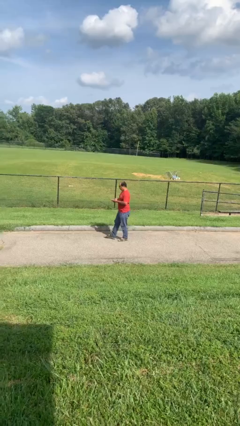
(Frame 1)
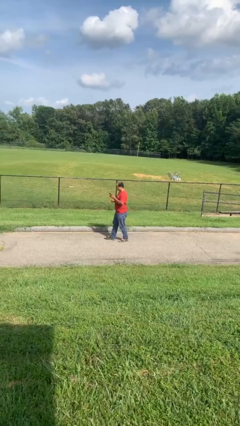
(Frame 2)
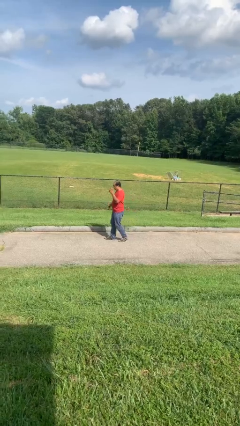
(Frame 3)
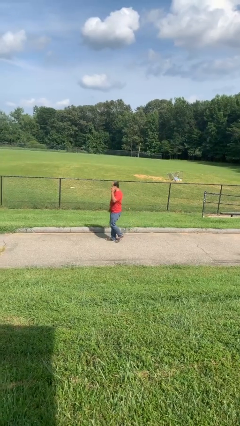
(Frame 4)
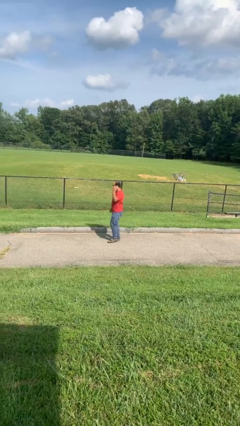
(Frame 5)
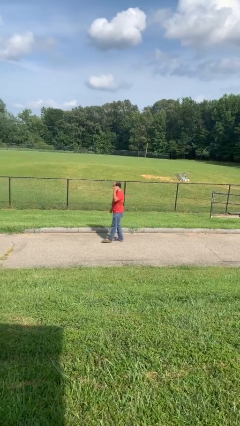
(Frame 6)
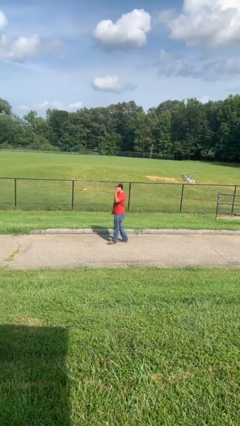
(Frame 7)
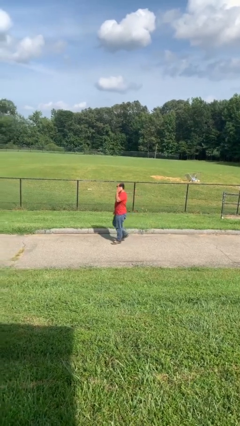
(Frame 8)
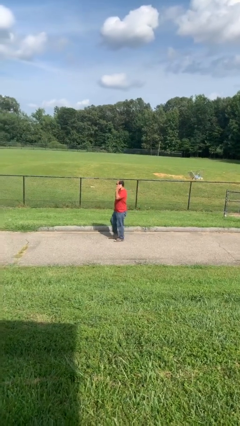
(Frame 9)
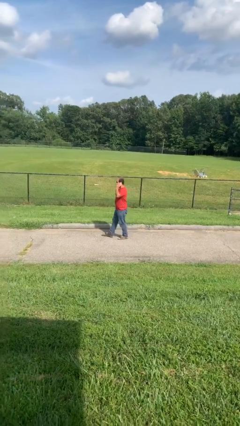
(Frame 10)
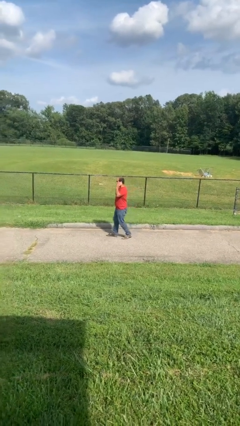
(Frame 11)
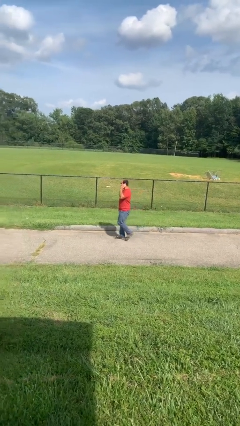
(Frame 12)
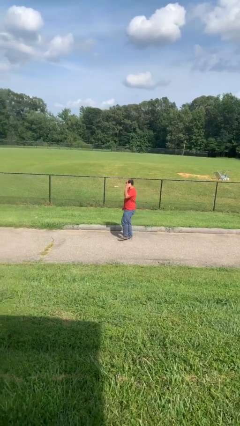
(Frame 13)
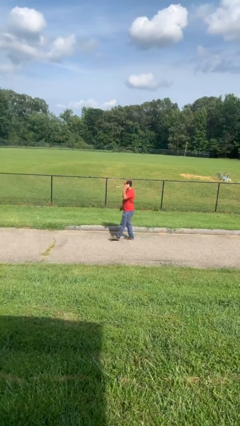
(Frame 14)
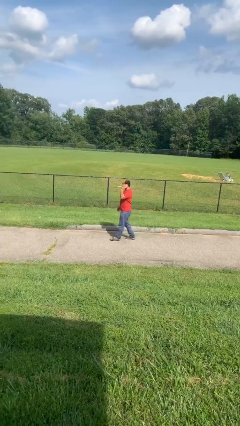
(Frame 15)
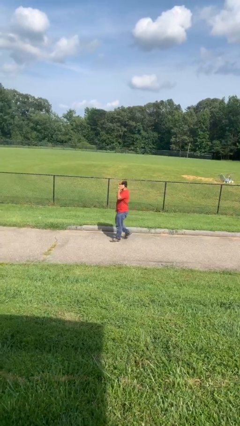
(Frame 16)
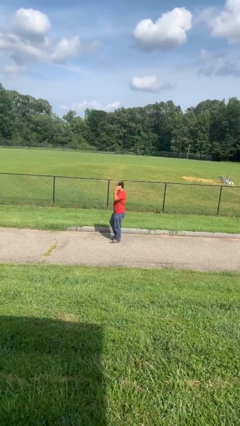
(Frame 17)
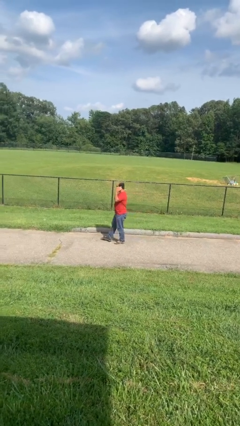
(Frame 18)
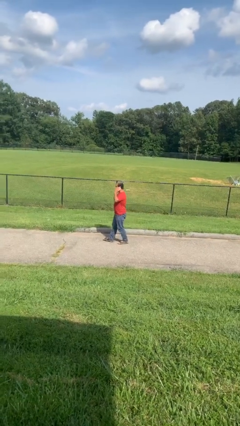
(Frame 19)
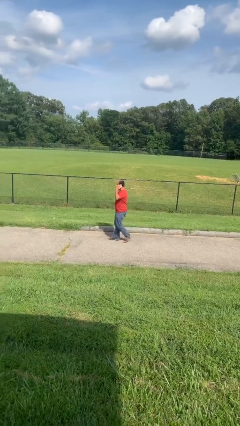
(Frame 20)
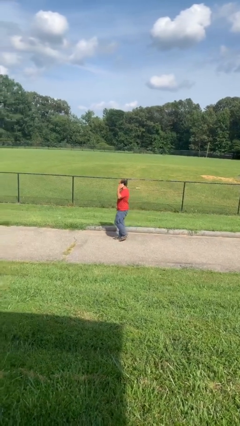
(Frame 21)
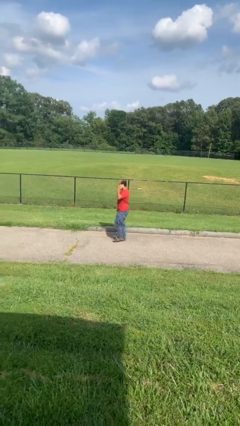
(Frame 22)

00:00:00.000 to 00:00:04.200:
person talks on phone

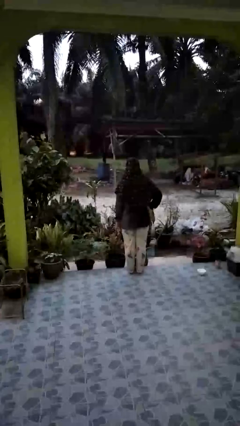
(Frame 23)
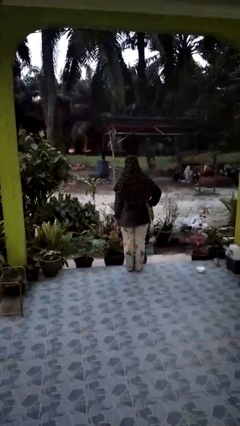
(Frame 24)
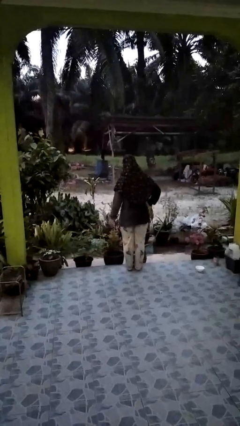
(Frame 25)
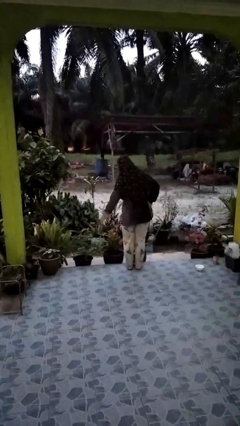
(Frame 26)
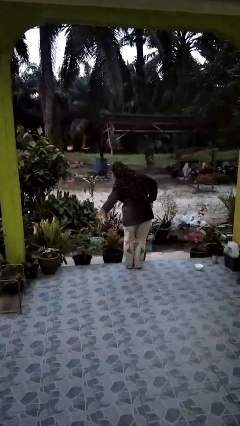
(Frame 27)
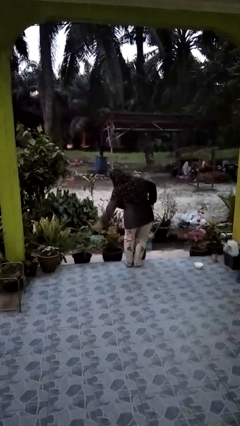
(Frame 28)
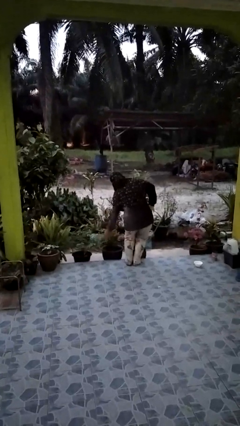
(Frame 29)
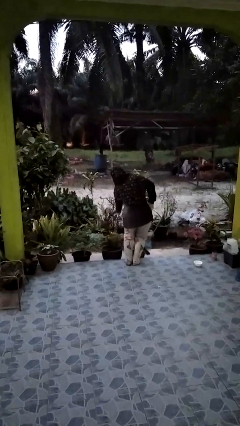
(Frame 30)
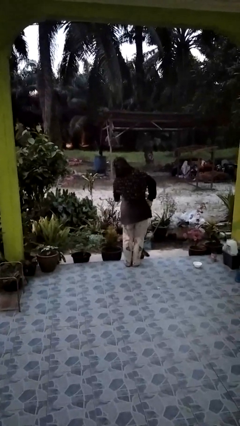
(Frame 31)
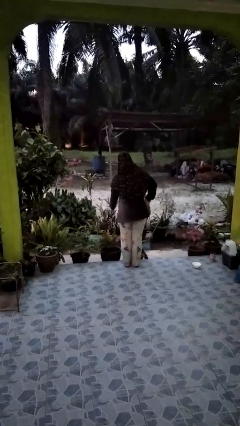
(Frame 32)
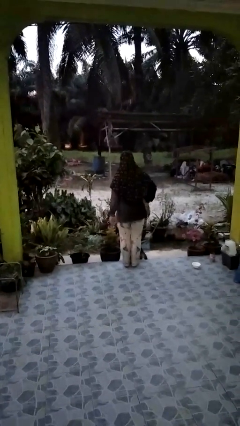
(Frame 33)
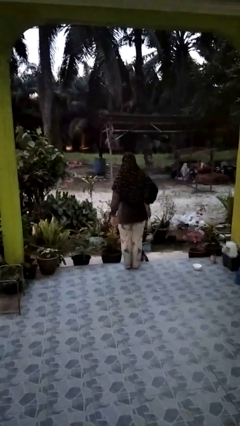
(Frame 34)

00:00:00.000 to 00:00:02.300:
person waves hand over object

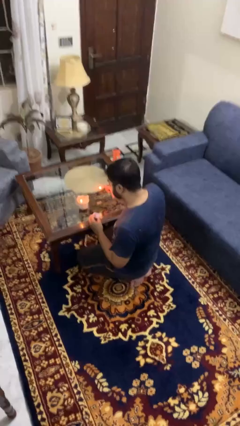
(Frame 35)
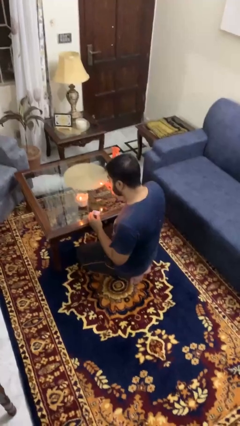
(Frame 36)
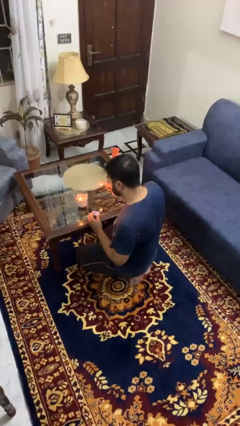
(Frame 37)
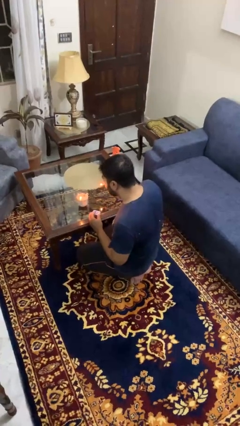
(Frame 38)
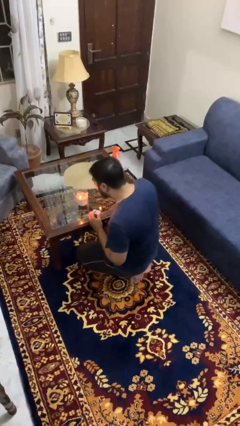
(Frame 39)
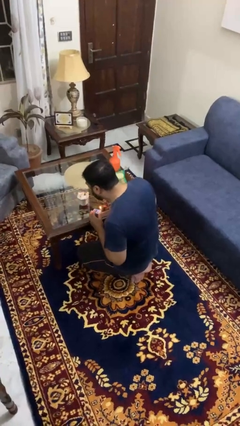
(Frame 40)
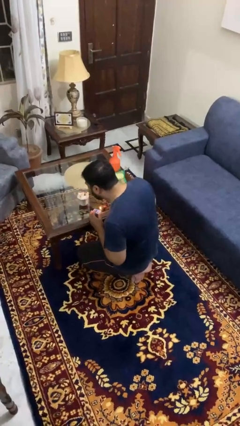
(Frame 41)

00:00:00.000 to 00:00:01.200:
person extinguishes candle

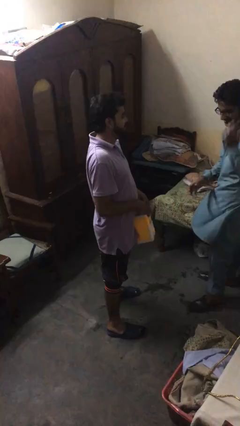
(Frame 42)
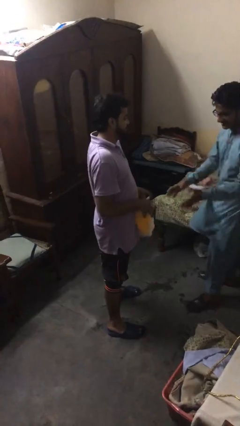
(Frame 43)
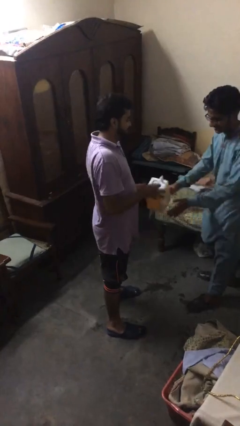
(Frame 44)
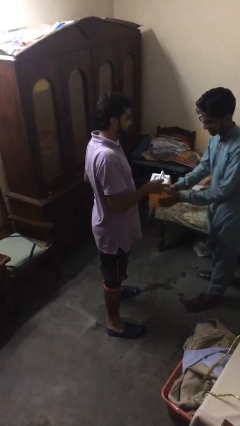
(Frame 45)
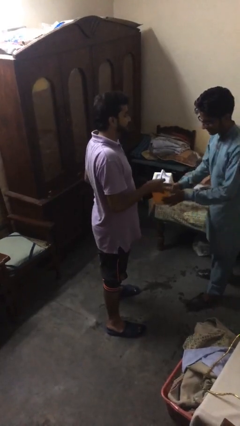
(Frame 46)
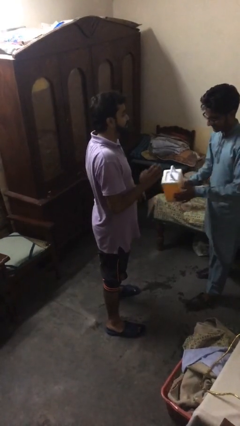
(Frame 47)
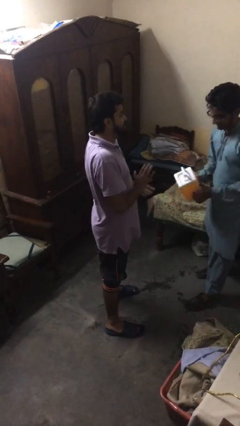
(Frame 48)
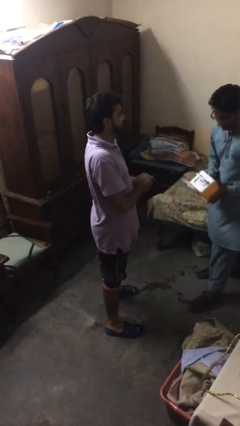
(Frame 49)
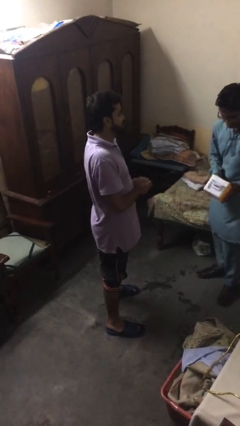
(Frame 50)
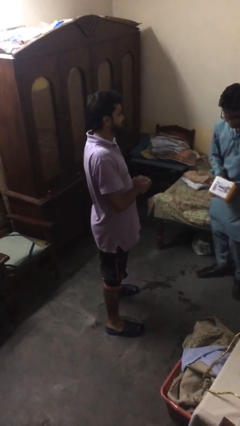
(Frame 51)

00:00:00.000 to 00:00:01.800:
person transfers object to person

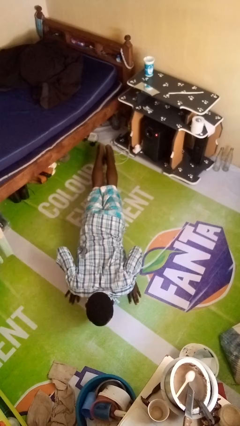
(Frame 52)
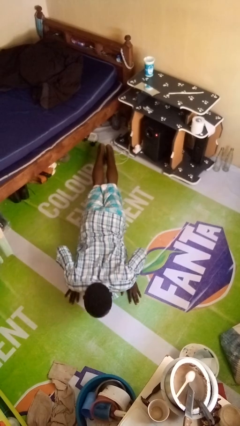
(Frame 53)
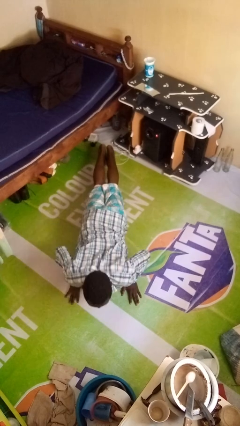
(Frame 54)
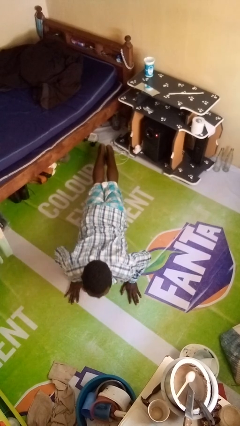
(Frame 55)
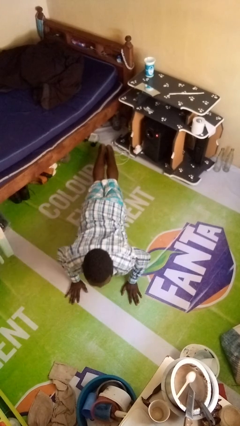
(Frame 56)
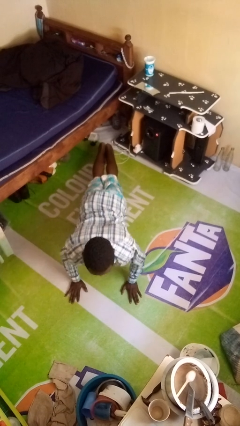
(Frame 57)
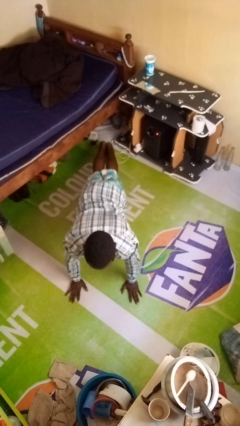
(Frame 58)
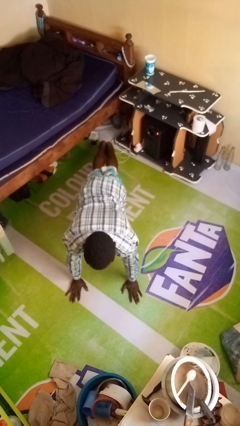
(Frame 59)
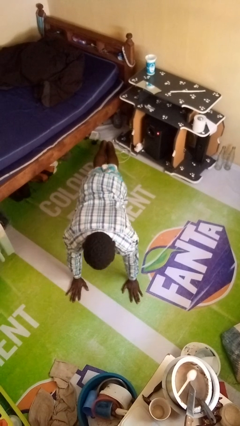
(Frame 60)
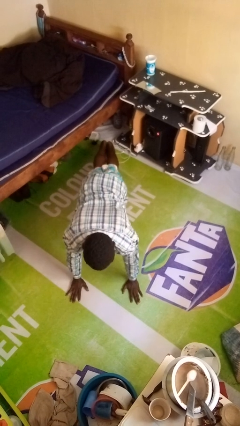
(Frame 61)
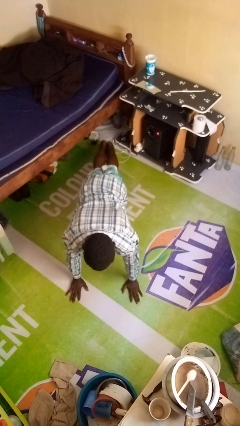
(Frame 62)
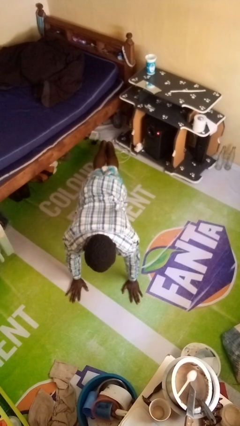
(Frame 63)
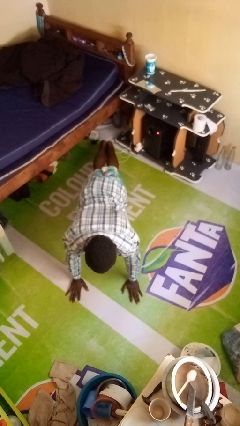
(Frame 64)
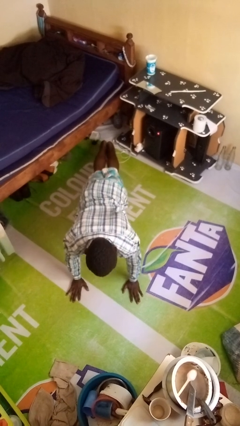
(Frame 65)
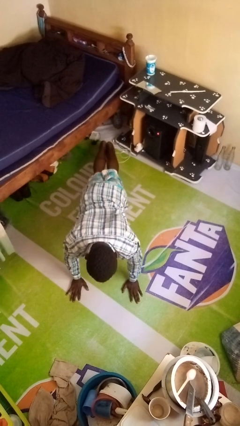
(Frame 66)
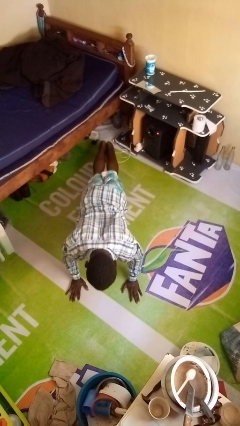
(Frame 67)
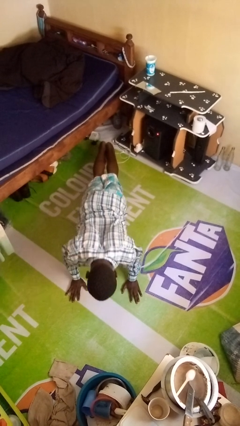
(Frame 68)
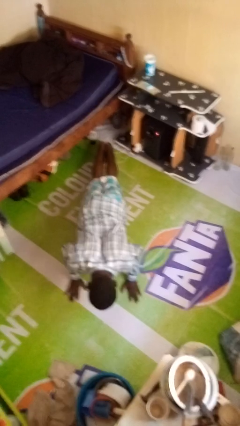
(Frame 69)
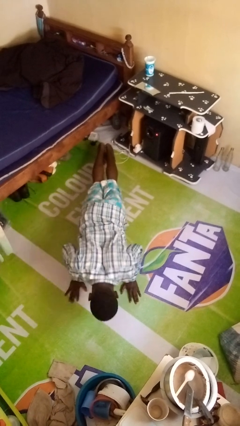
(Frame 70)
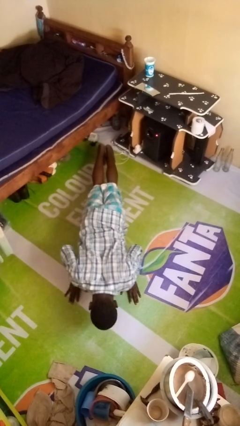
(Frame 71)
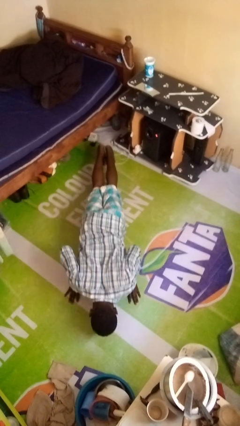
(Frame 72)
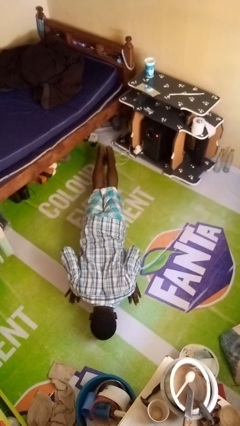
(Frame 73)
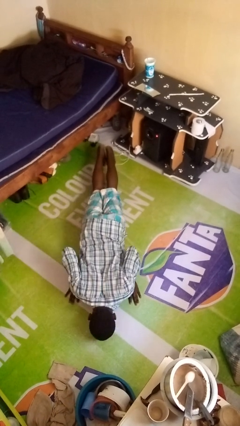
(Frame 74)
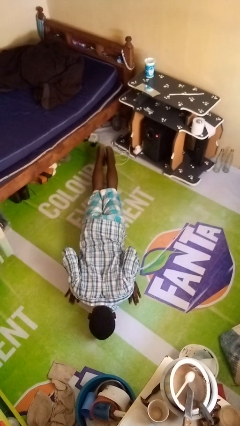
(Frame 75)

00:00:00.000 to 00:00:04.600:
person exercises with pushup

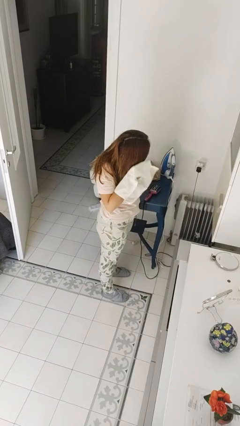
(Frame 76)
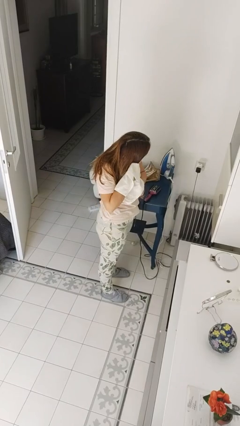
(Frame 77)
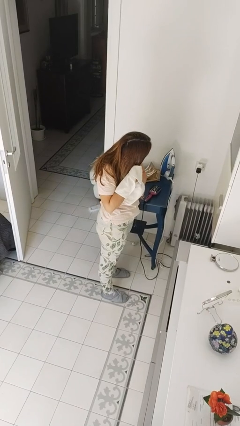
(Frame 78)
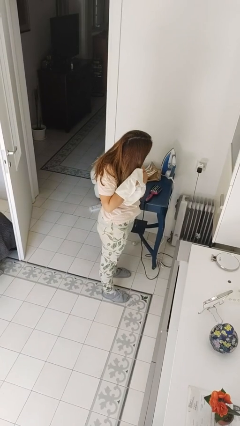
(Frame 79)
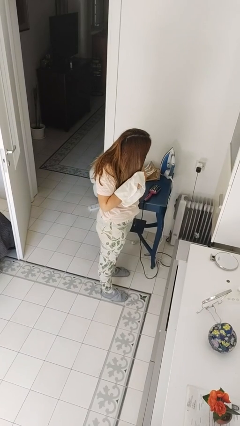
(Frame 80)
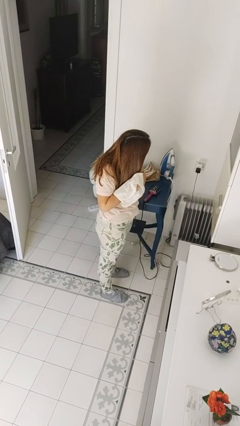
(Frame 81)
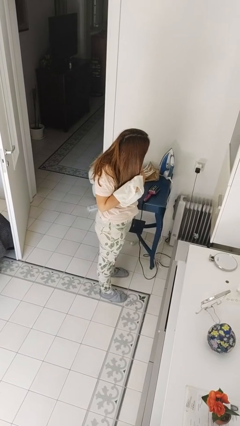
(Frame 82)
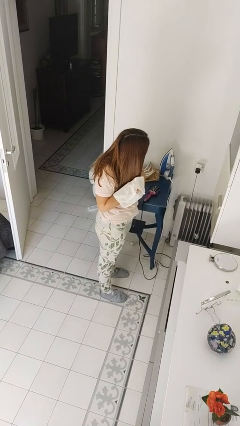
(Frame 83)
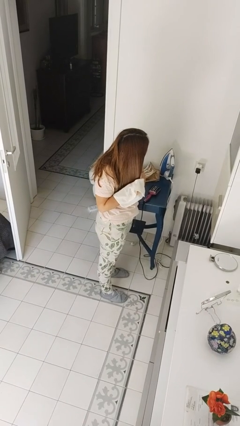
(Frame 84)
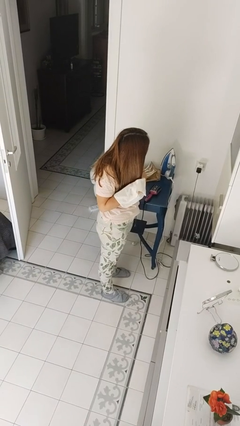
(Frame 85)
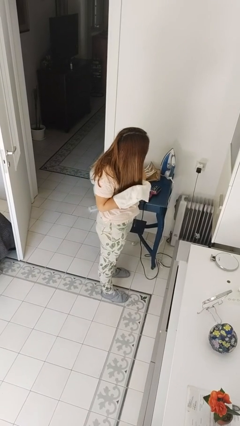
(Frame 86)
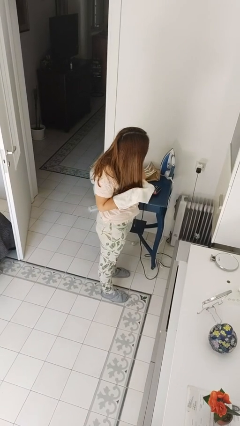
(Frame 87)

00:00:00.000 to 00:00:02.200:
person dries hair with towel

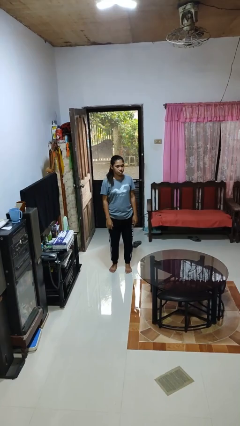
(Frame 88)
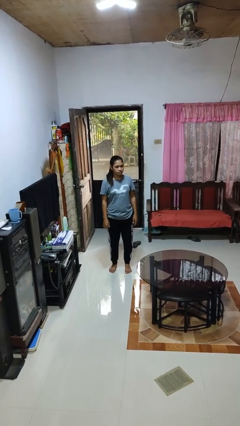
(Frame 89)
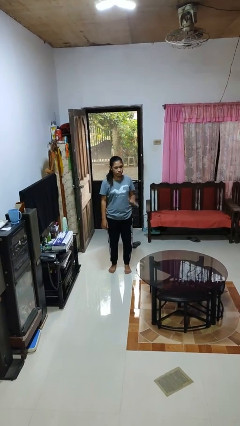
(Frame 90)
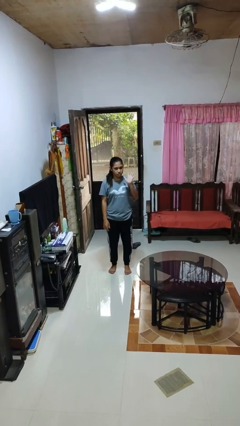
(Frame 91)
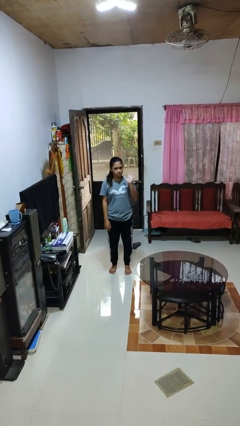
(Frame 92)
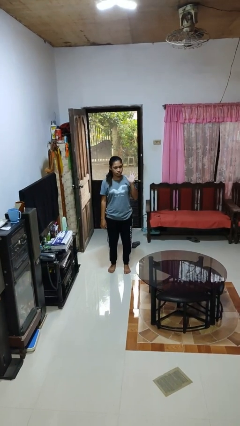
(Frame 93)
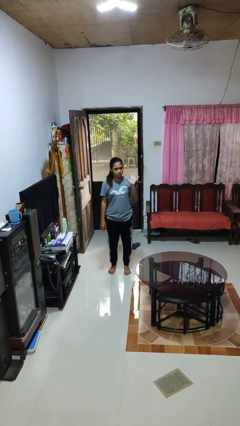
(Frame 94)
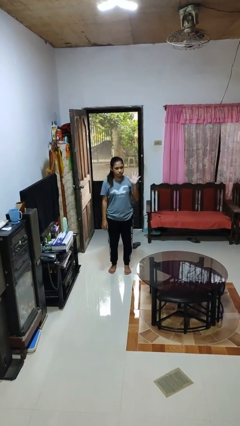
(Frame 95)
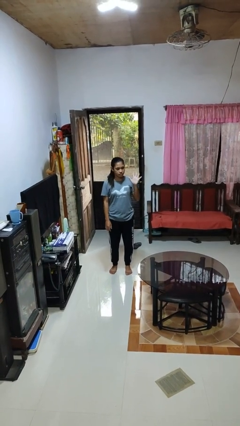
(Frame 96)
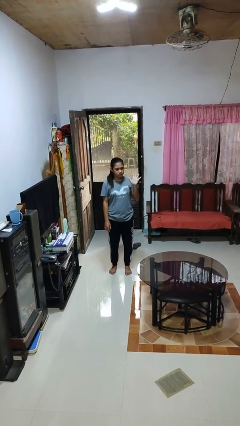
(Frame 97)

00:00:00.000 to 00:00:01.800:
person gestures number five
